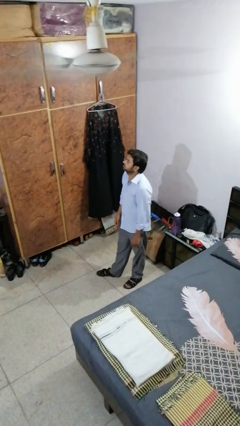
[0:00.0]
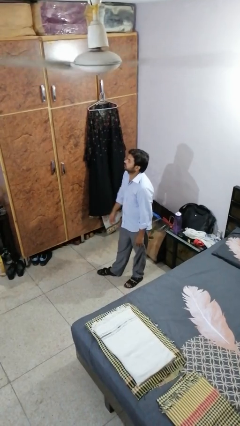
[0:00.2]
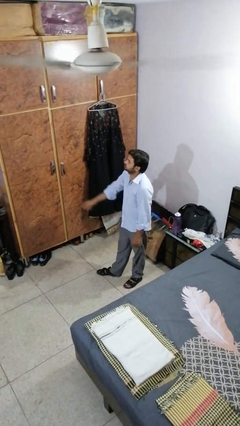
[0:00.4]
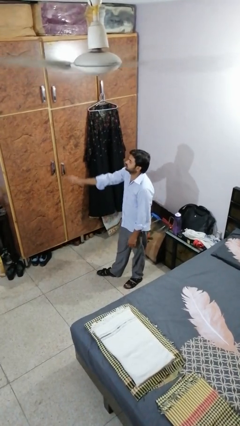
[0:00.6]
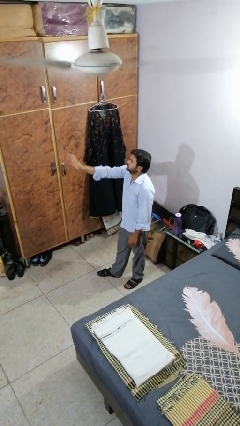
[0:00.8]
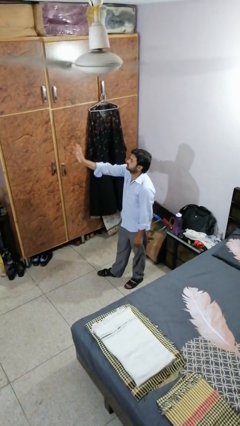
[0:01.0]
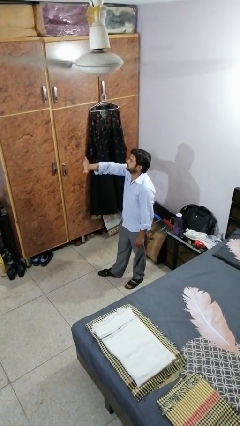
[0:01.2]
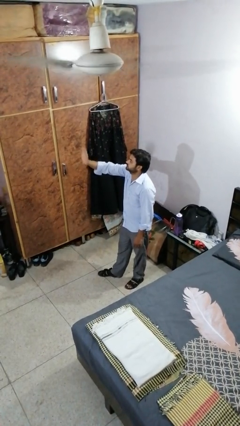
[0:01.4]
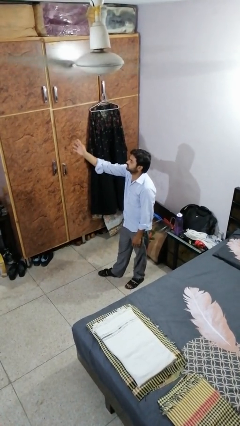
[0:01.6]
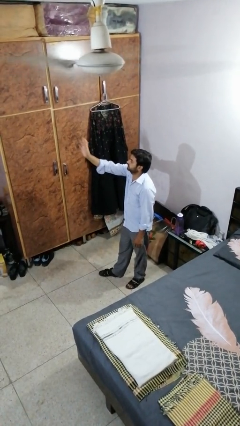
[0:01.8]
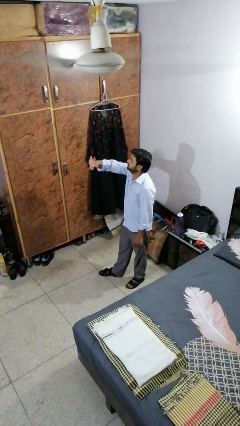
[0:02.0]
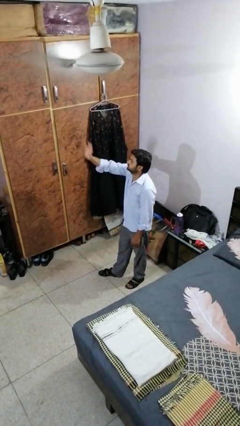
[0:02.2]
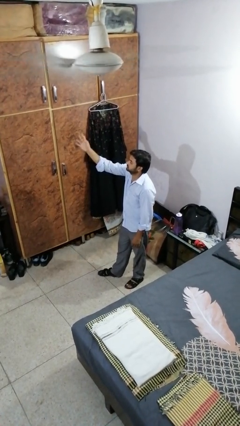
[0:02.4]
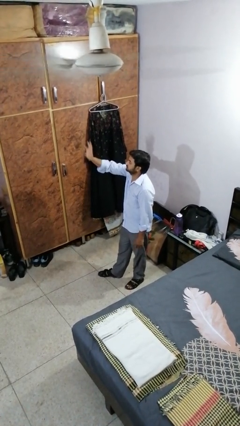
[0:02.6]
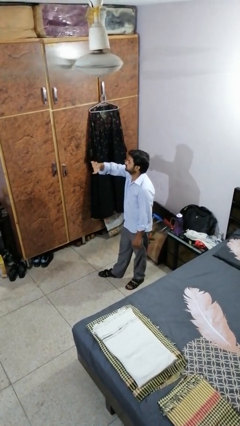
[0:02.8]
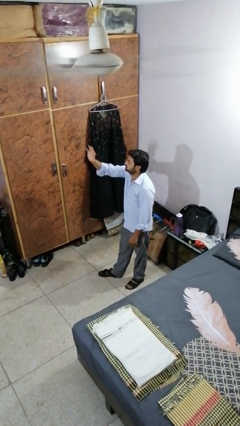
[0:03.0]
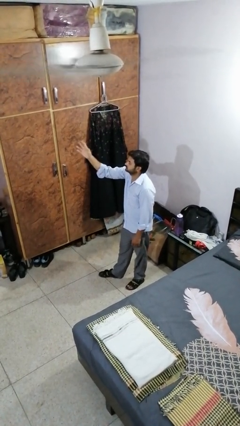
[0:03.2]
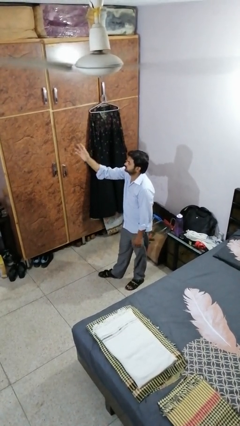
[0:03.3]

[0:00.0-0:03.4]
person waves at person

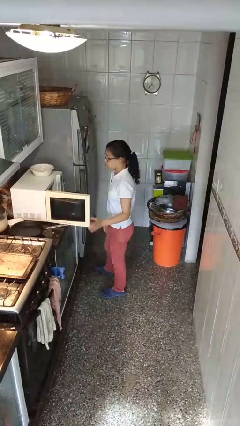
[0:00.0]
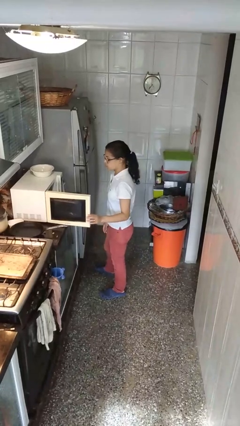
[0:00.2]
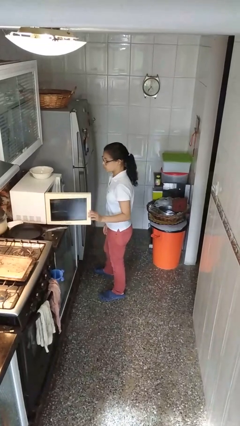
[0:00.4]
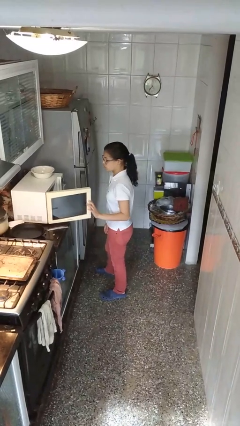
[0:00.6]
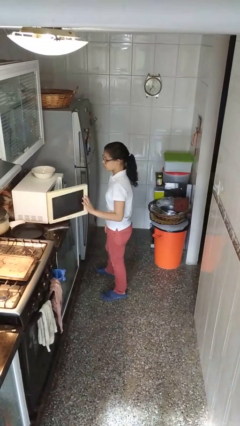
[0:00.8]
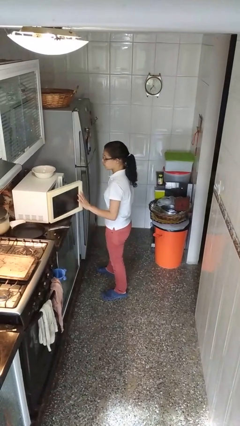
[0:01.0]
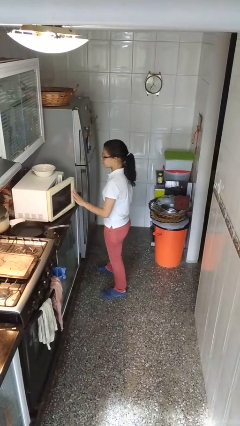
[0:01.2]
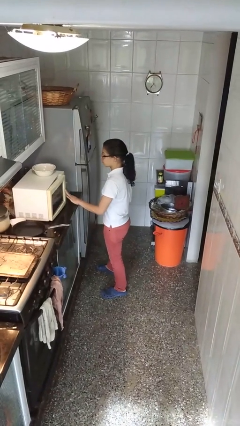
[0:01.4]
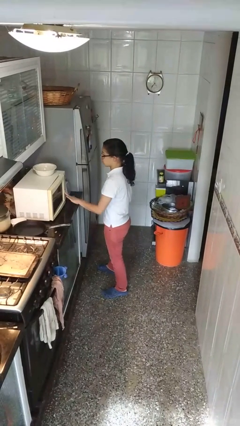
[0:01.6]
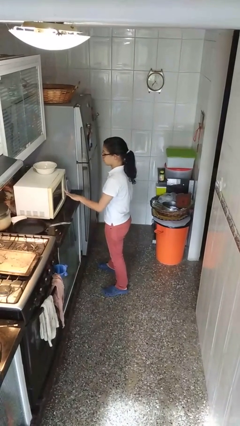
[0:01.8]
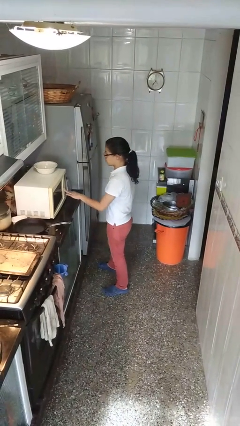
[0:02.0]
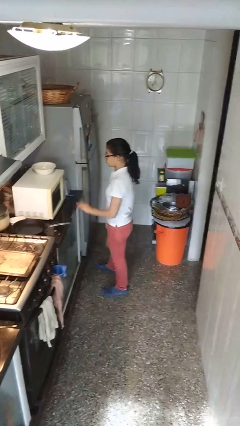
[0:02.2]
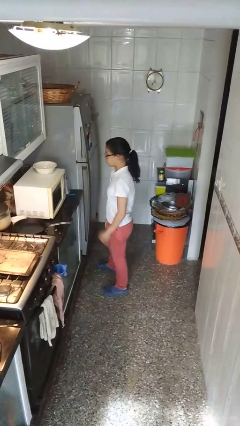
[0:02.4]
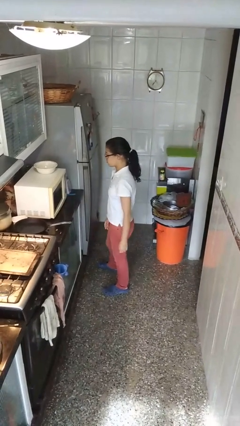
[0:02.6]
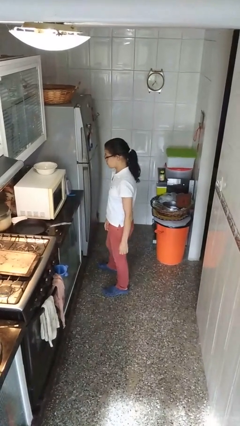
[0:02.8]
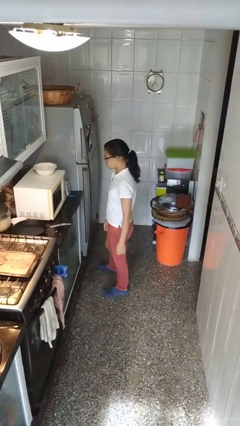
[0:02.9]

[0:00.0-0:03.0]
person closes microwave

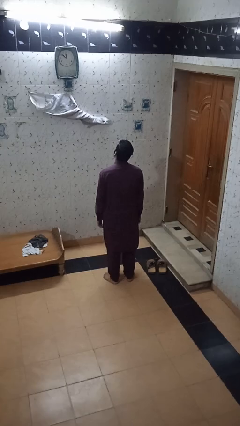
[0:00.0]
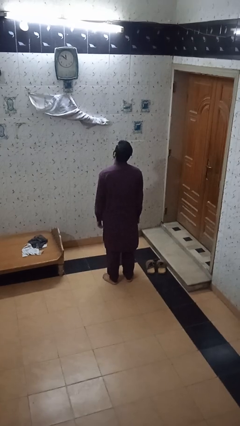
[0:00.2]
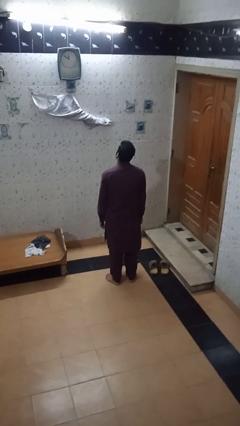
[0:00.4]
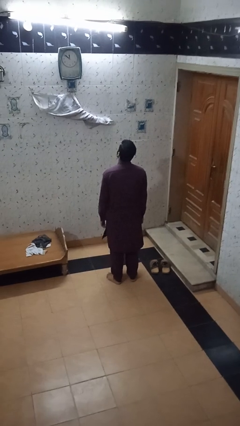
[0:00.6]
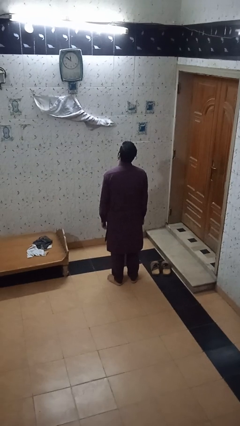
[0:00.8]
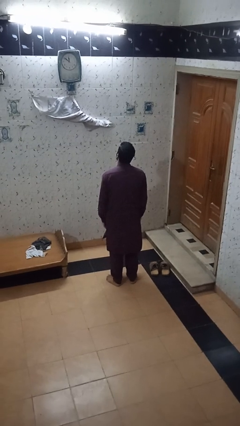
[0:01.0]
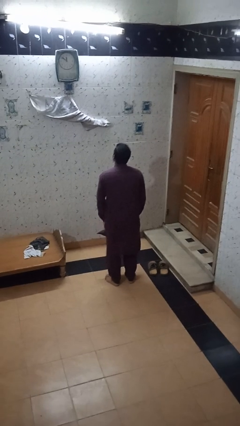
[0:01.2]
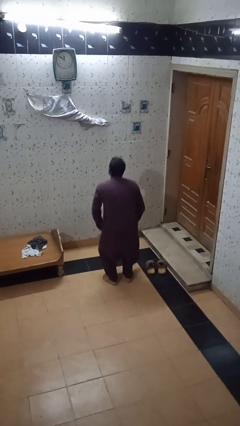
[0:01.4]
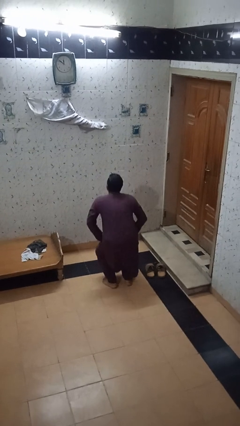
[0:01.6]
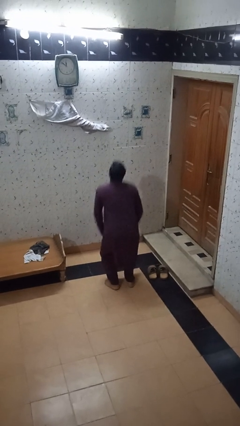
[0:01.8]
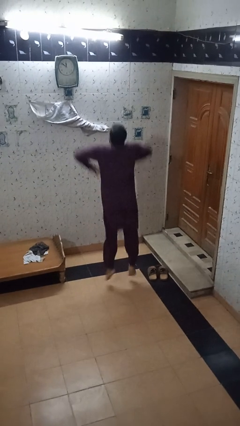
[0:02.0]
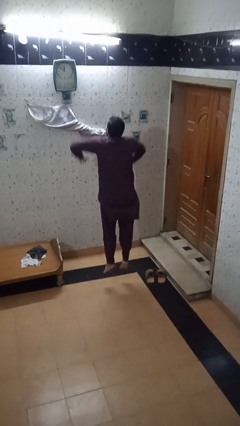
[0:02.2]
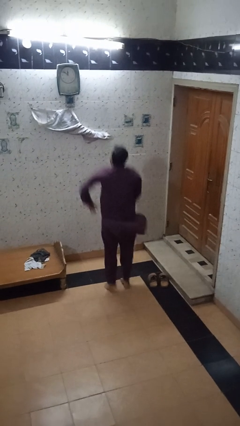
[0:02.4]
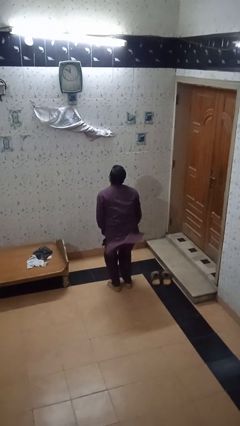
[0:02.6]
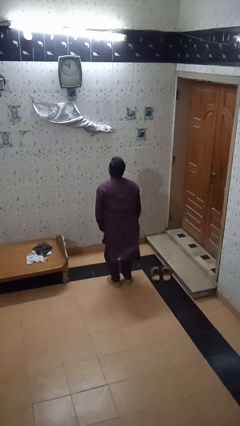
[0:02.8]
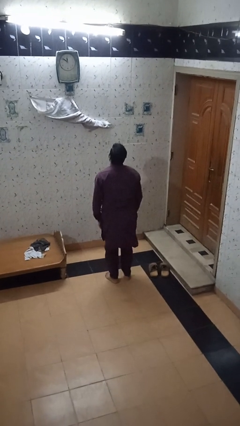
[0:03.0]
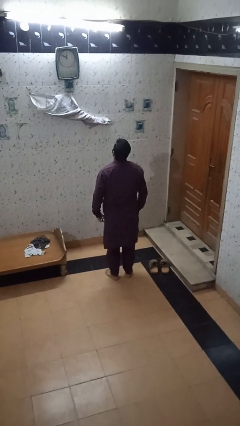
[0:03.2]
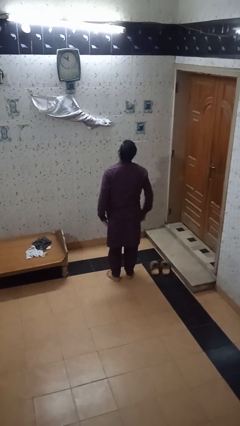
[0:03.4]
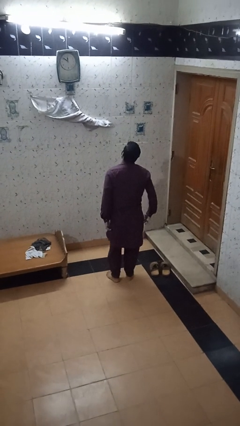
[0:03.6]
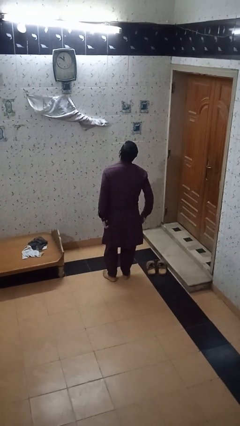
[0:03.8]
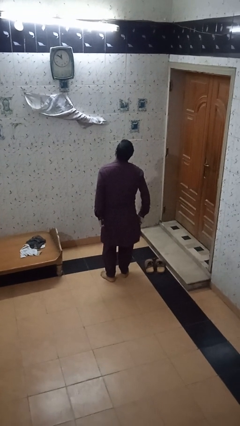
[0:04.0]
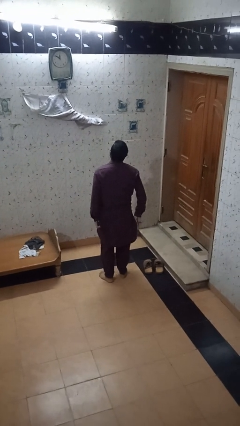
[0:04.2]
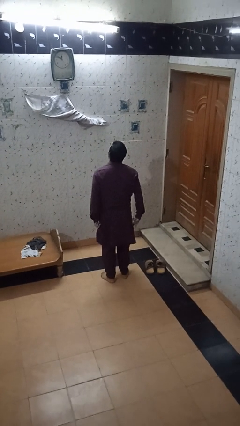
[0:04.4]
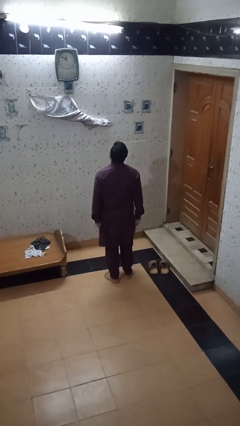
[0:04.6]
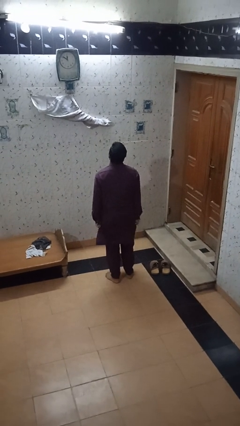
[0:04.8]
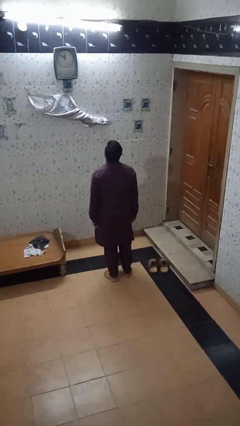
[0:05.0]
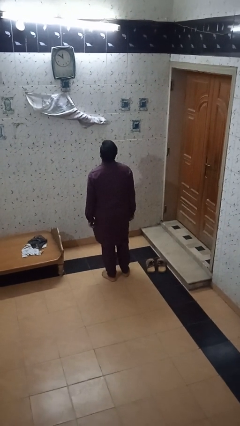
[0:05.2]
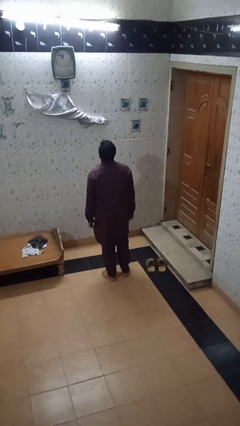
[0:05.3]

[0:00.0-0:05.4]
person jumps

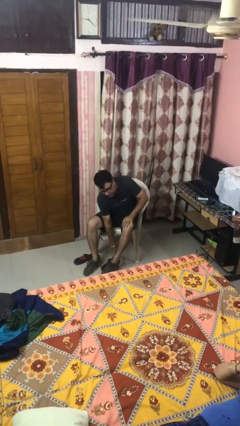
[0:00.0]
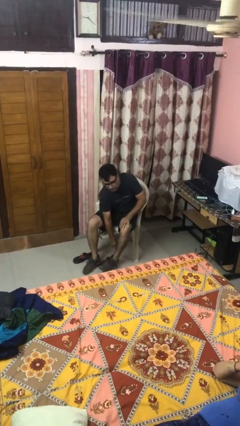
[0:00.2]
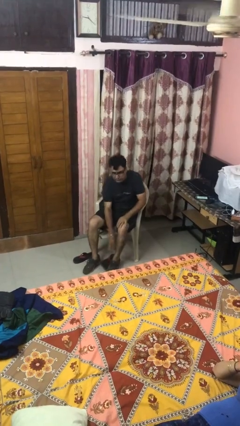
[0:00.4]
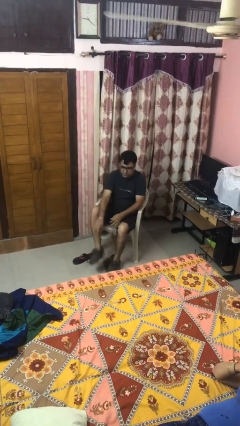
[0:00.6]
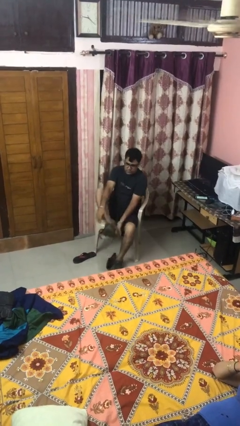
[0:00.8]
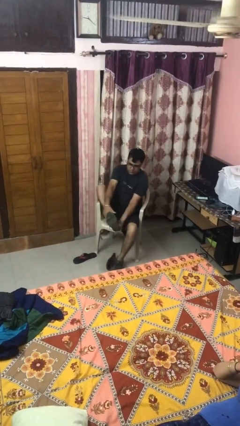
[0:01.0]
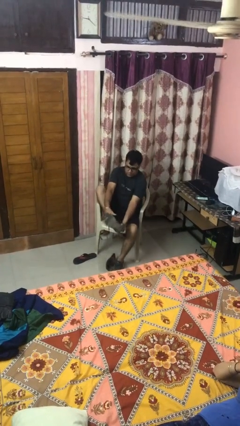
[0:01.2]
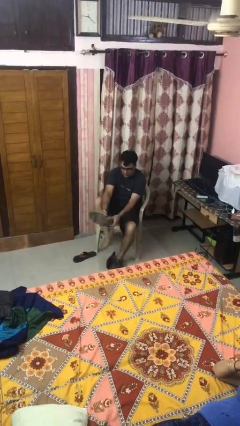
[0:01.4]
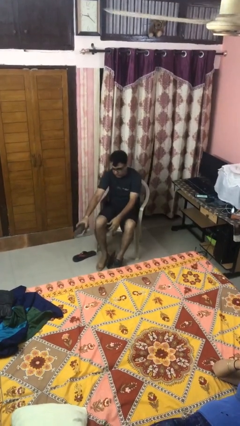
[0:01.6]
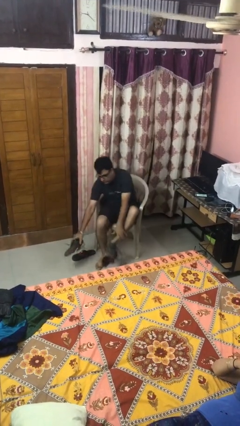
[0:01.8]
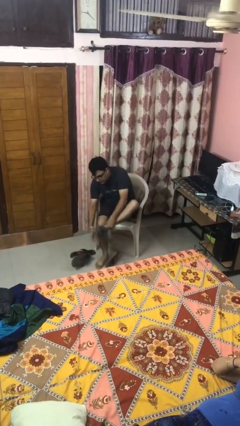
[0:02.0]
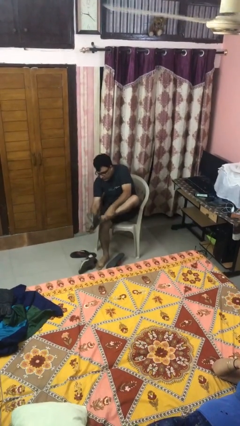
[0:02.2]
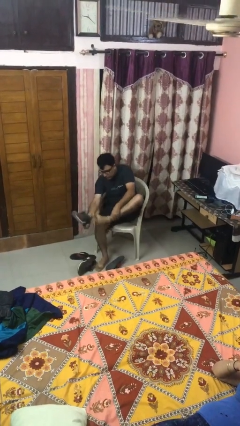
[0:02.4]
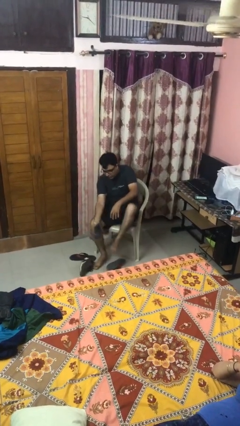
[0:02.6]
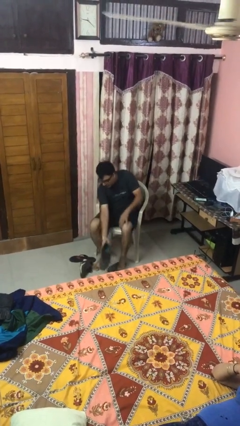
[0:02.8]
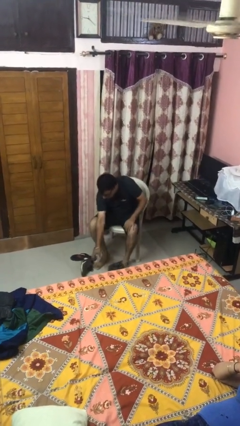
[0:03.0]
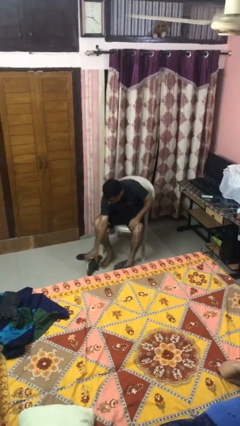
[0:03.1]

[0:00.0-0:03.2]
person takes off shoes

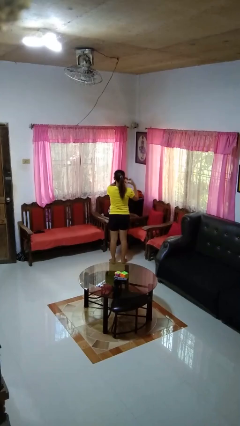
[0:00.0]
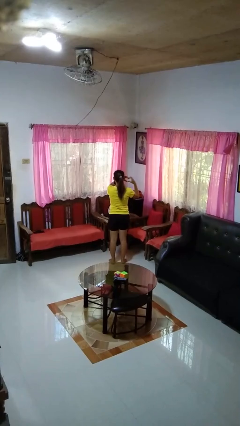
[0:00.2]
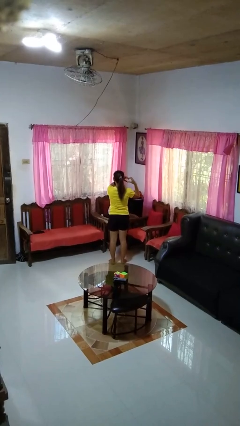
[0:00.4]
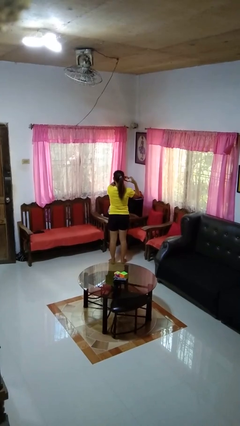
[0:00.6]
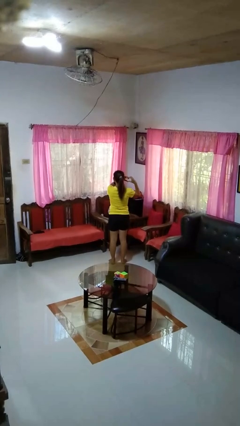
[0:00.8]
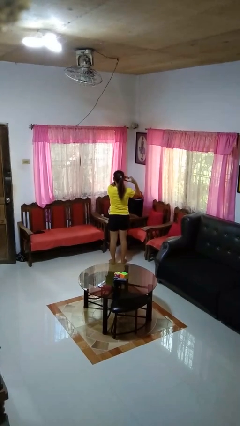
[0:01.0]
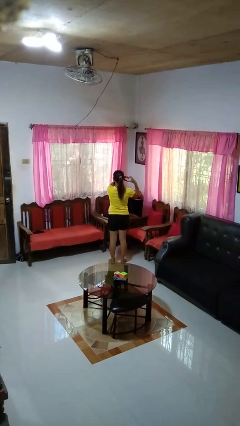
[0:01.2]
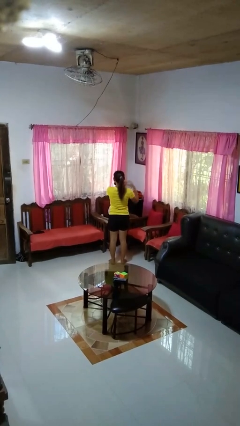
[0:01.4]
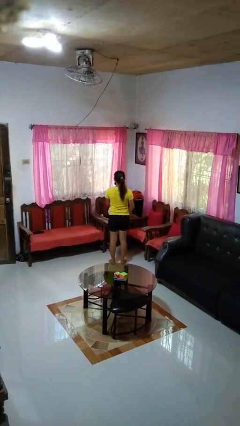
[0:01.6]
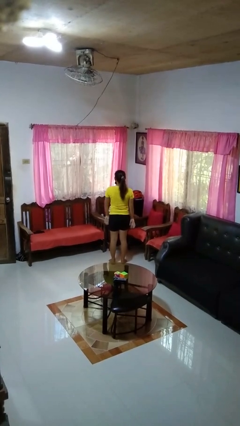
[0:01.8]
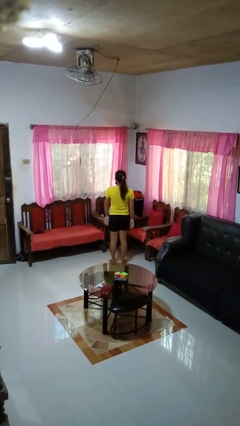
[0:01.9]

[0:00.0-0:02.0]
person gestures heart

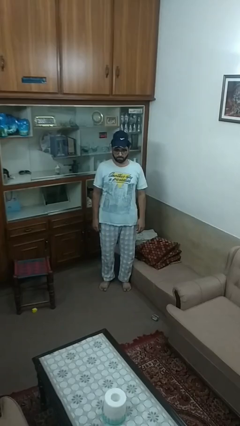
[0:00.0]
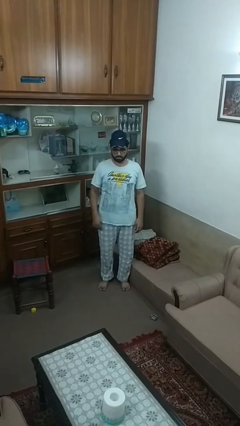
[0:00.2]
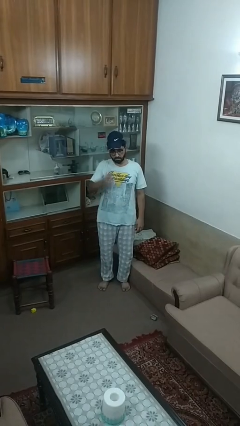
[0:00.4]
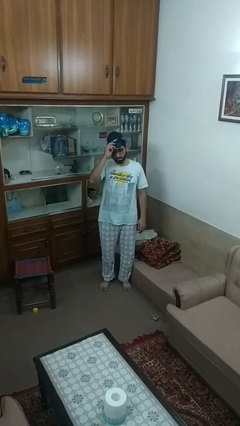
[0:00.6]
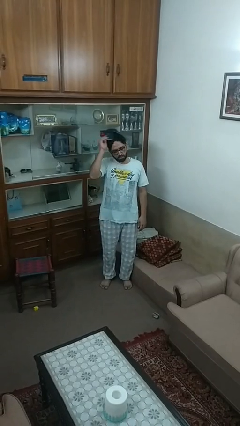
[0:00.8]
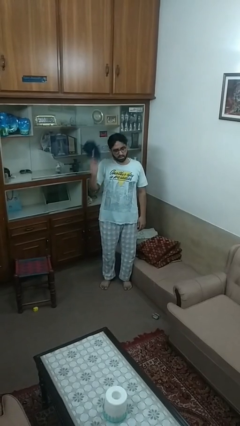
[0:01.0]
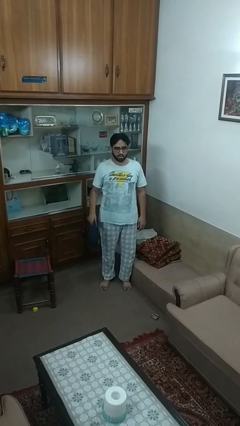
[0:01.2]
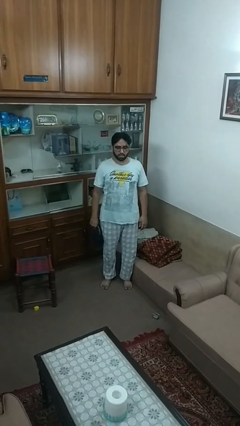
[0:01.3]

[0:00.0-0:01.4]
person takes off hat
